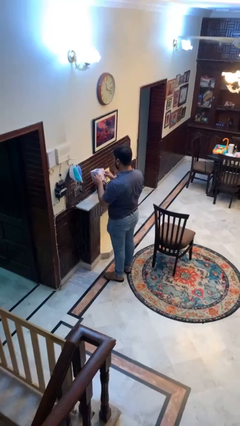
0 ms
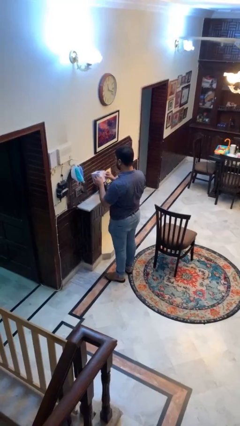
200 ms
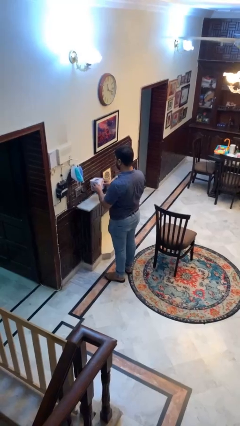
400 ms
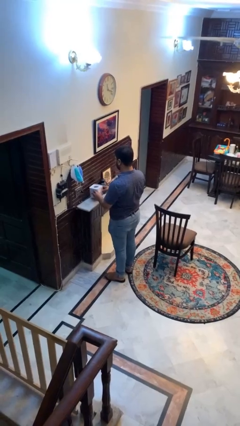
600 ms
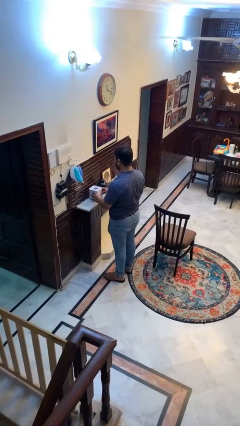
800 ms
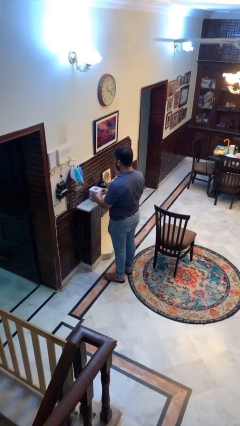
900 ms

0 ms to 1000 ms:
person puts down object on countertop

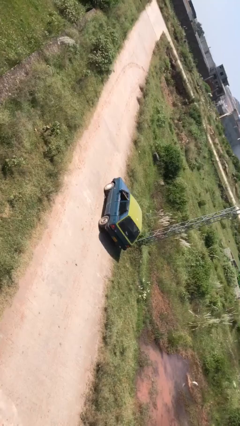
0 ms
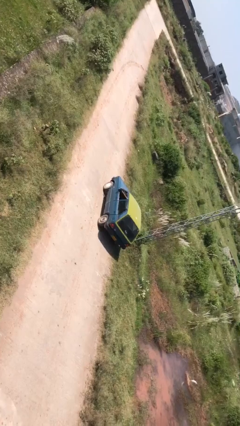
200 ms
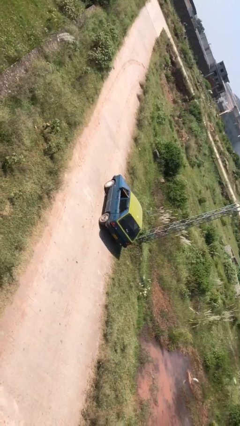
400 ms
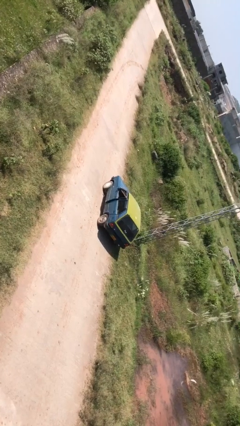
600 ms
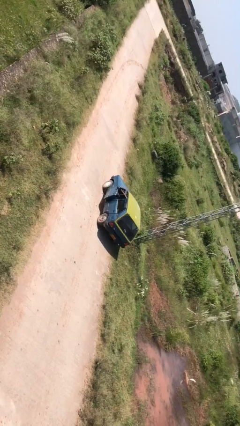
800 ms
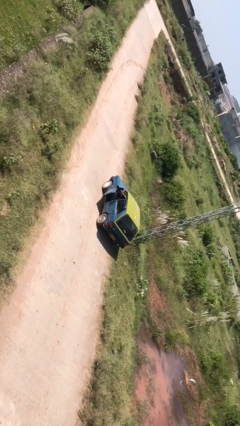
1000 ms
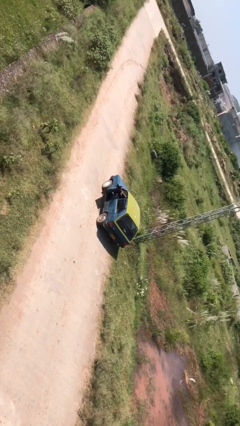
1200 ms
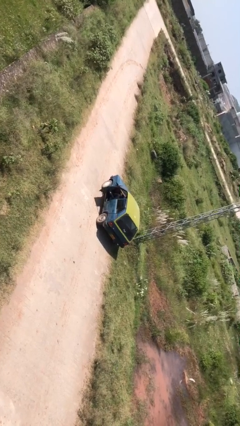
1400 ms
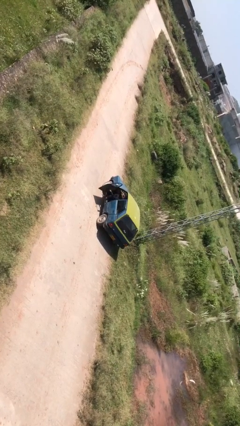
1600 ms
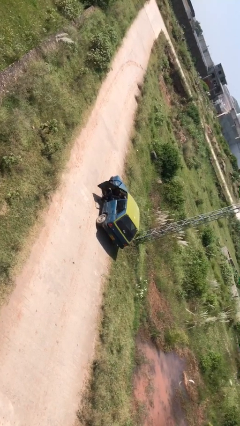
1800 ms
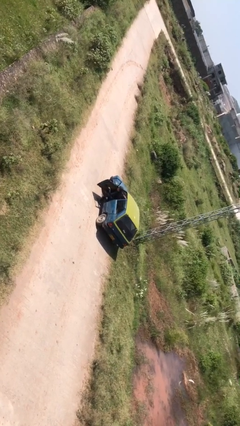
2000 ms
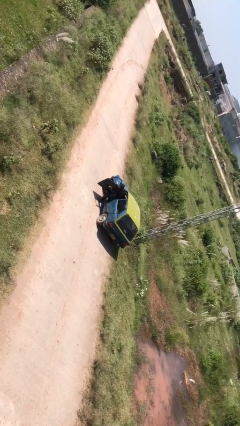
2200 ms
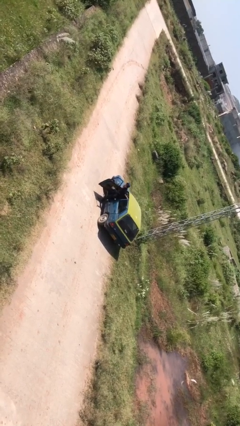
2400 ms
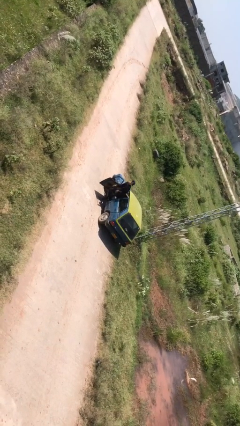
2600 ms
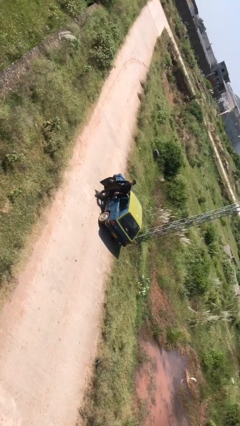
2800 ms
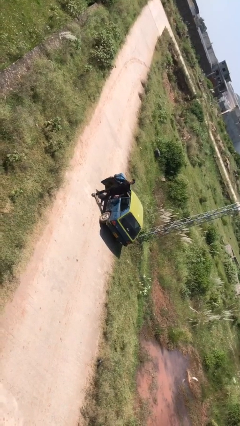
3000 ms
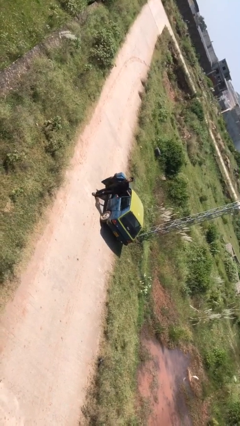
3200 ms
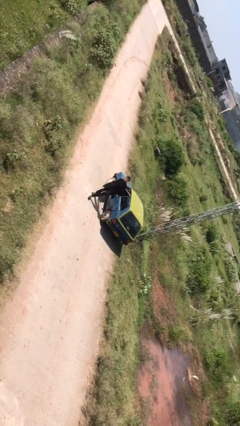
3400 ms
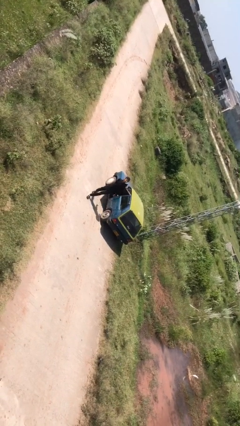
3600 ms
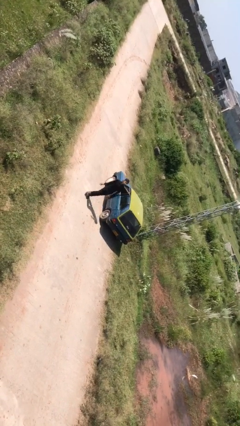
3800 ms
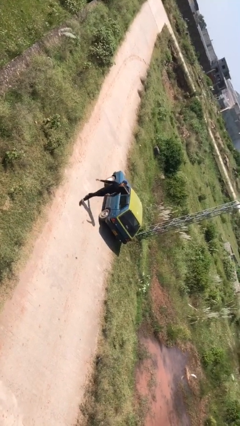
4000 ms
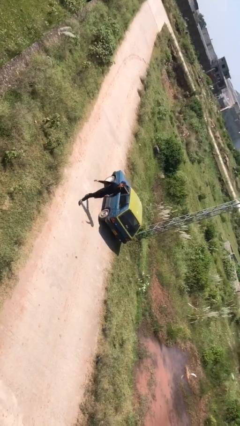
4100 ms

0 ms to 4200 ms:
car drops off person

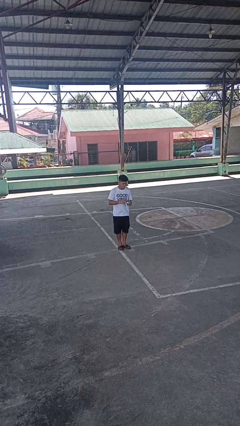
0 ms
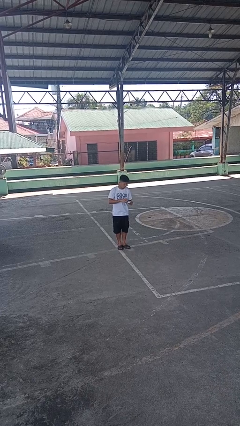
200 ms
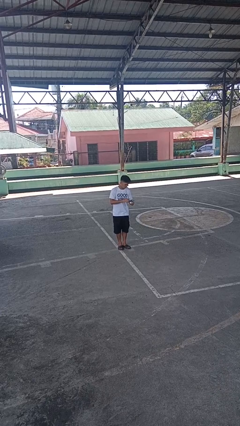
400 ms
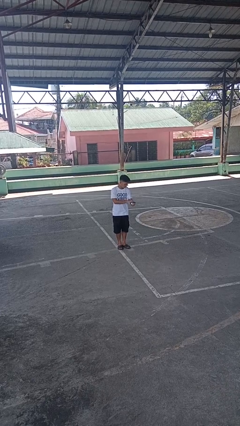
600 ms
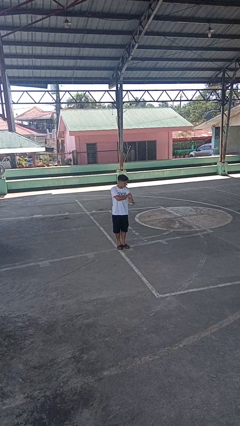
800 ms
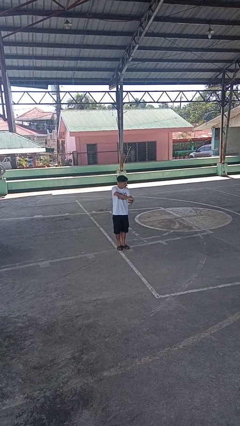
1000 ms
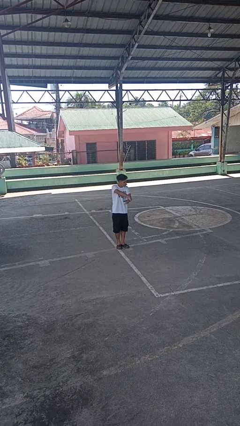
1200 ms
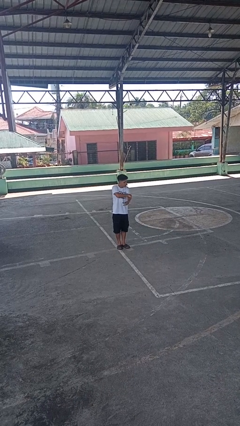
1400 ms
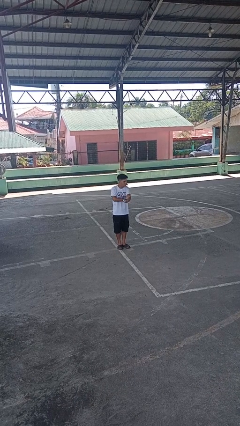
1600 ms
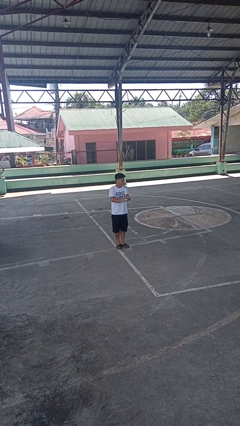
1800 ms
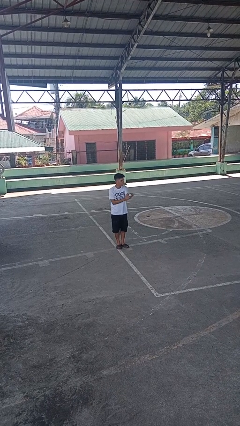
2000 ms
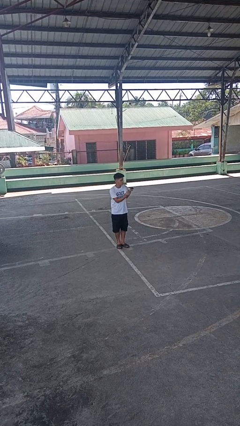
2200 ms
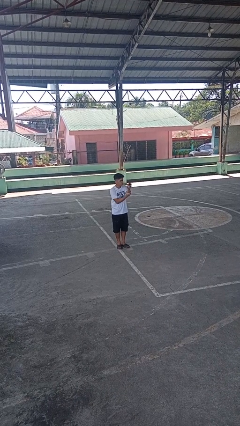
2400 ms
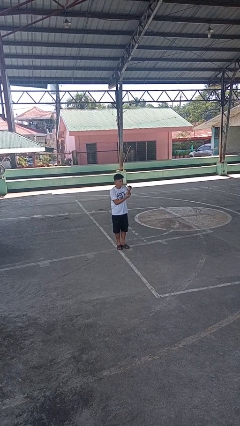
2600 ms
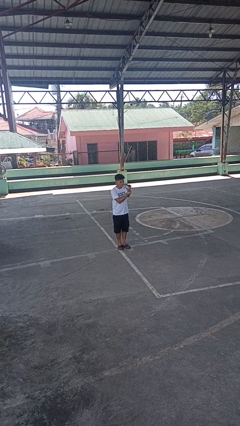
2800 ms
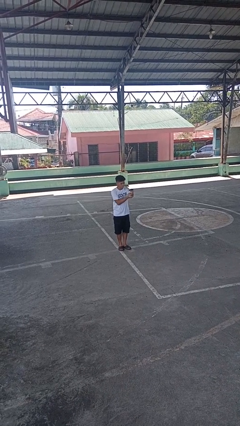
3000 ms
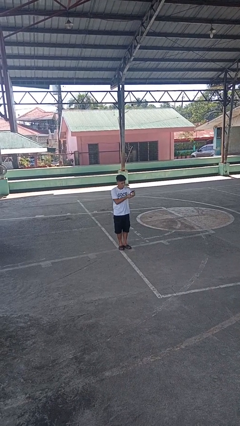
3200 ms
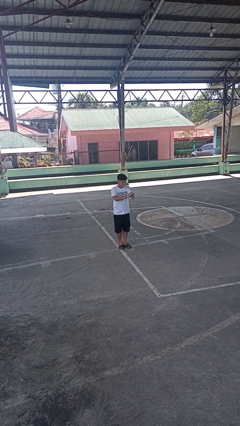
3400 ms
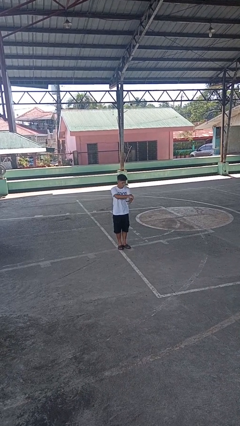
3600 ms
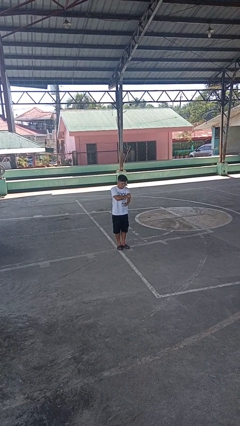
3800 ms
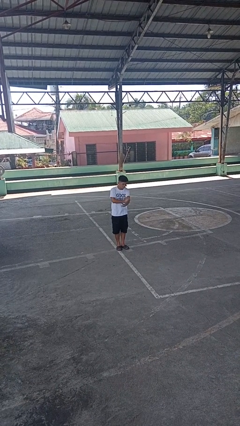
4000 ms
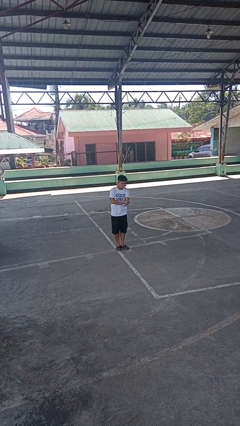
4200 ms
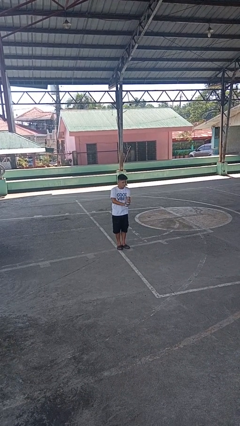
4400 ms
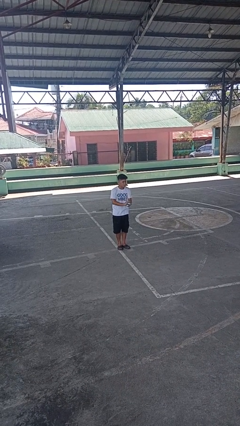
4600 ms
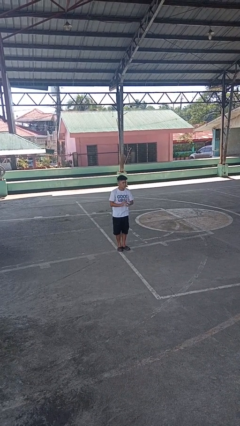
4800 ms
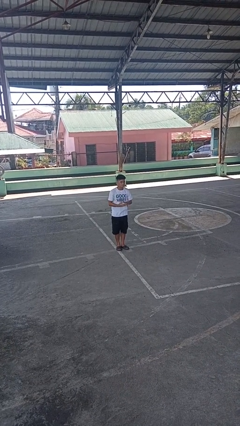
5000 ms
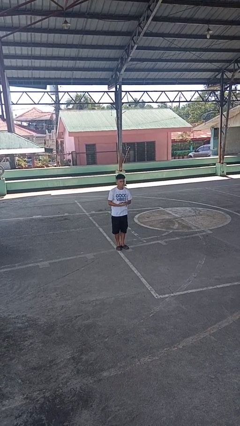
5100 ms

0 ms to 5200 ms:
person applies sunscreen

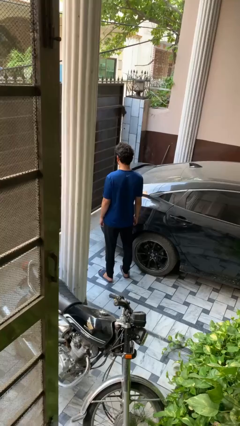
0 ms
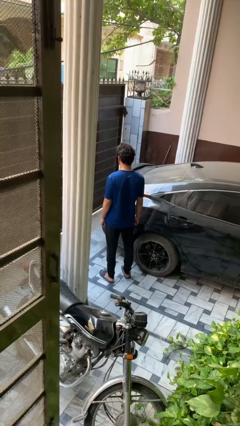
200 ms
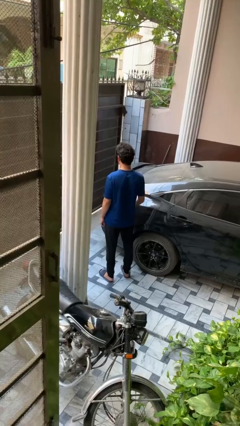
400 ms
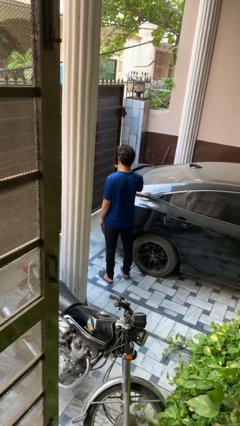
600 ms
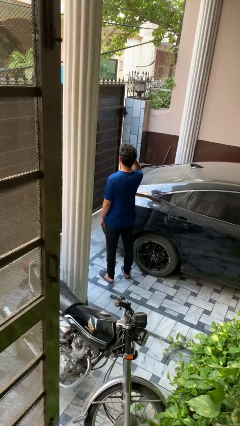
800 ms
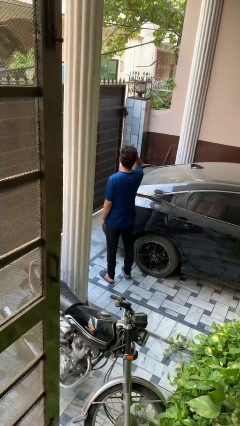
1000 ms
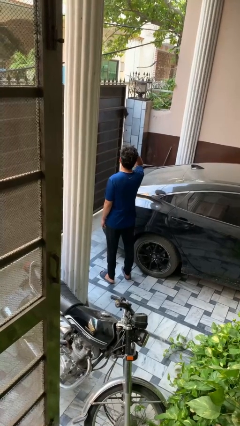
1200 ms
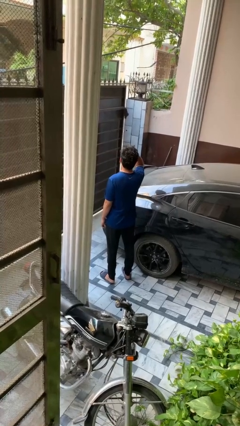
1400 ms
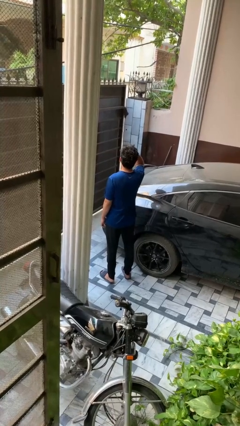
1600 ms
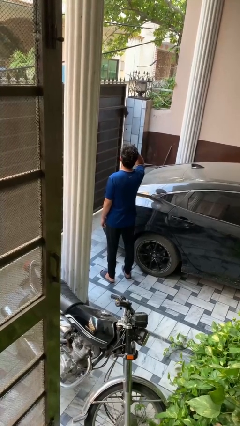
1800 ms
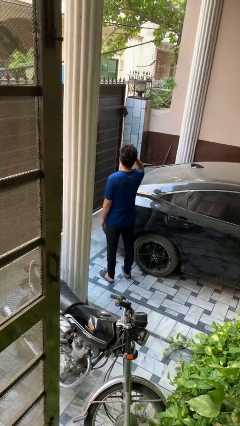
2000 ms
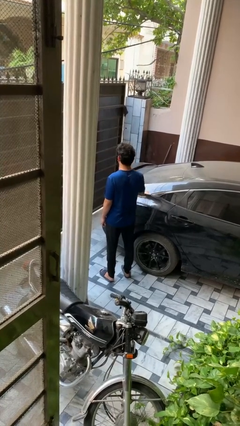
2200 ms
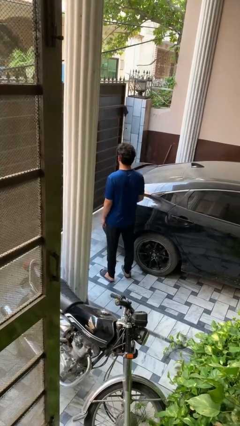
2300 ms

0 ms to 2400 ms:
person shades eyes

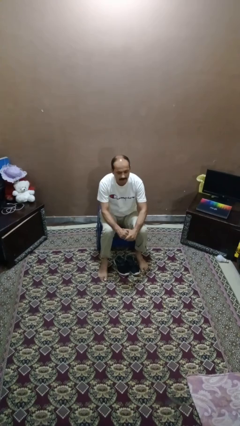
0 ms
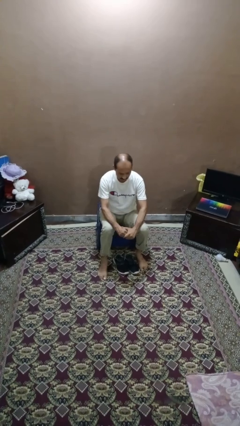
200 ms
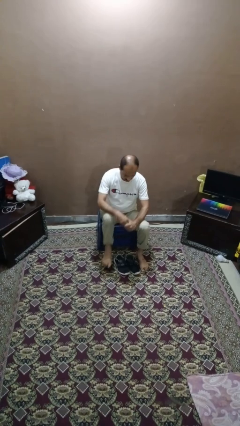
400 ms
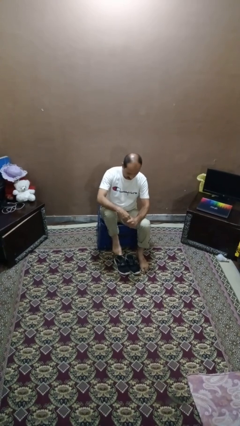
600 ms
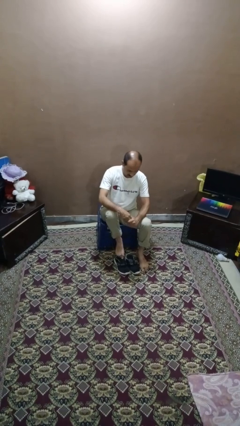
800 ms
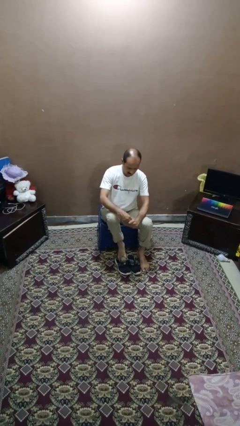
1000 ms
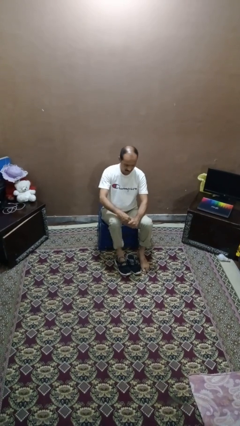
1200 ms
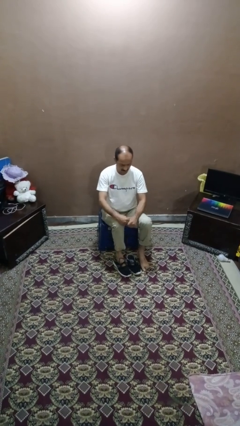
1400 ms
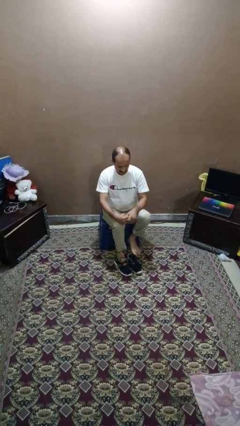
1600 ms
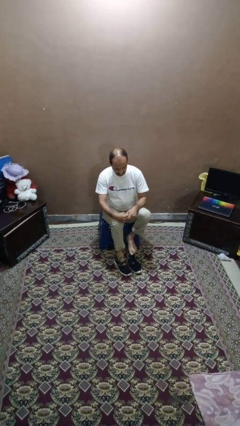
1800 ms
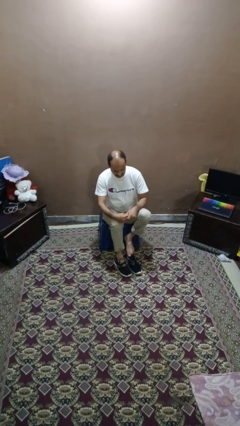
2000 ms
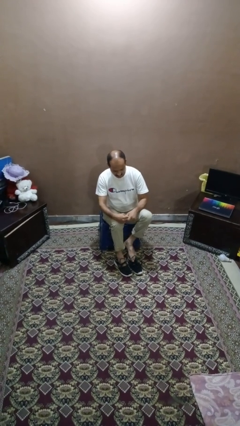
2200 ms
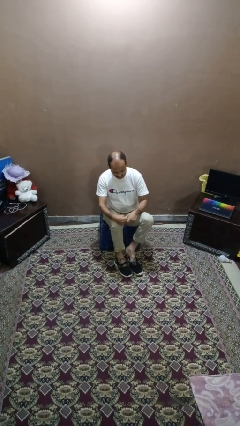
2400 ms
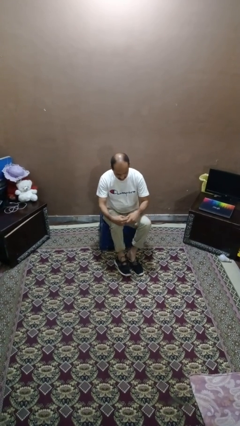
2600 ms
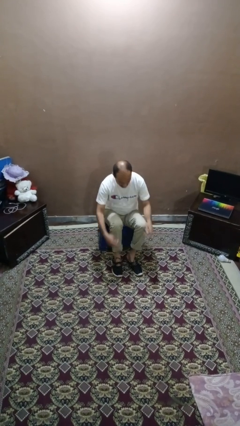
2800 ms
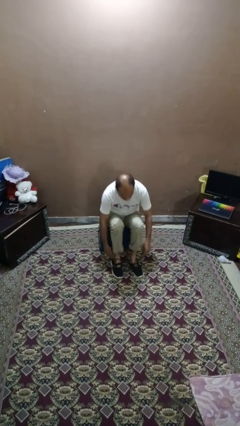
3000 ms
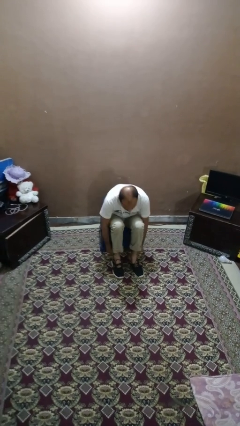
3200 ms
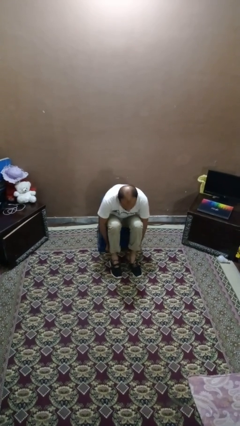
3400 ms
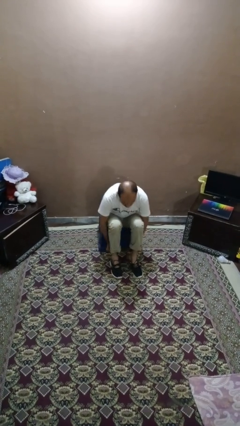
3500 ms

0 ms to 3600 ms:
person puts on shoes

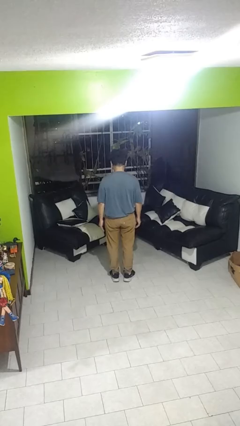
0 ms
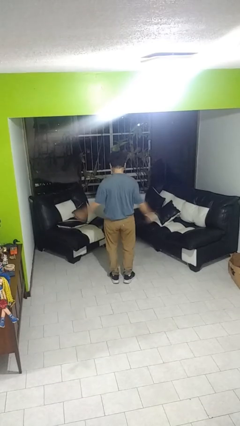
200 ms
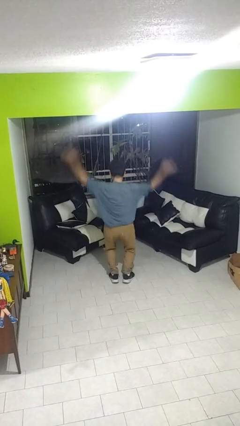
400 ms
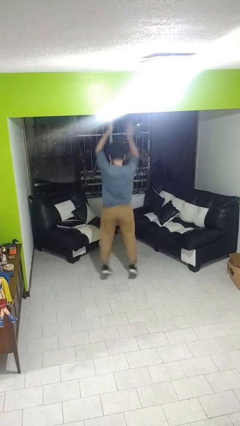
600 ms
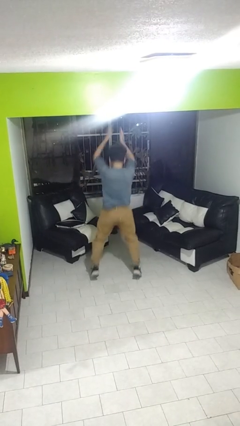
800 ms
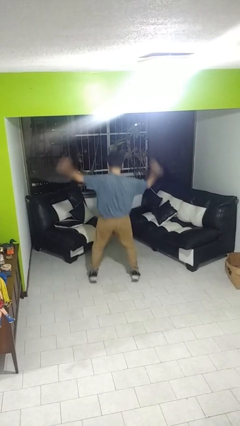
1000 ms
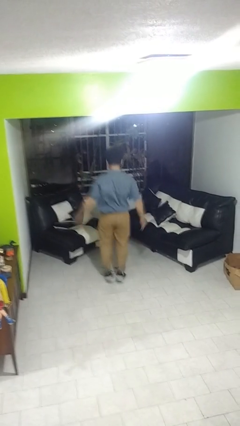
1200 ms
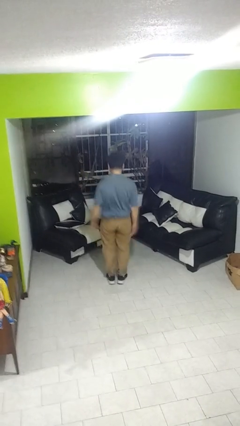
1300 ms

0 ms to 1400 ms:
person exercises with jumping jacks
